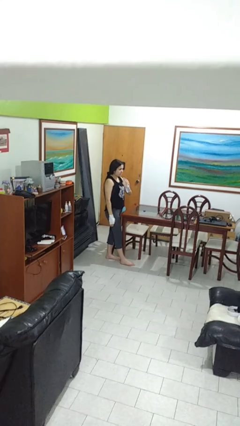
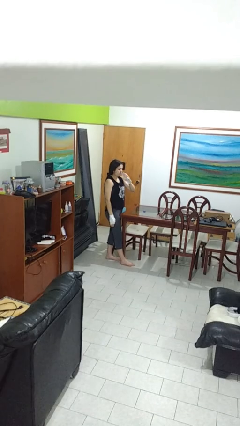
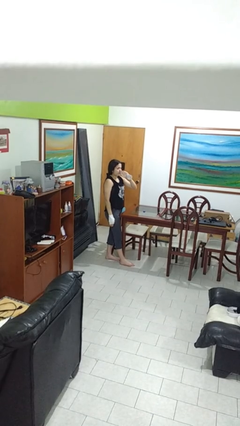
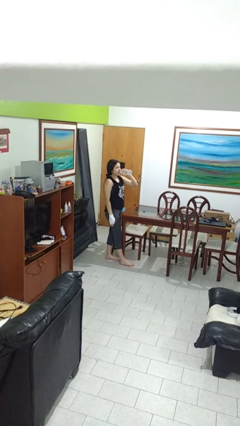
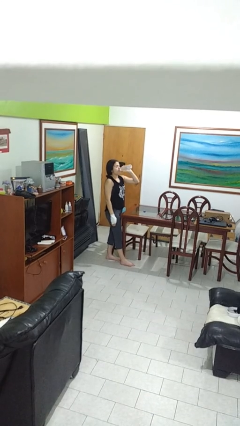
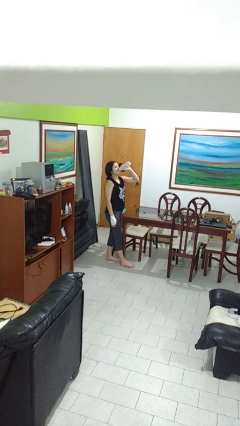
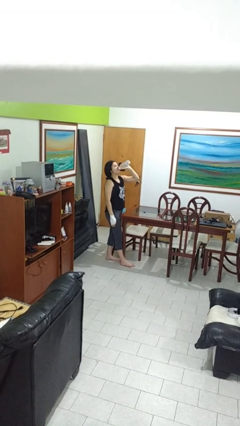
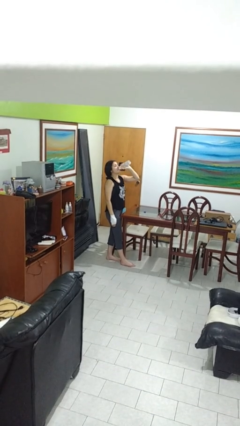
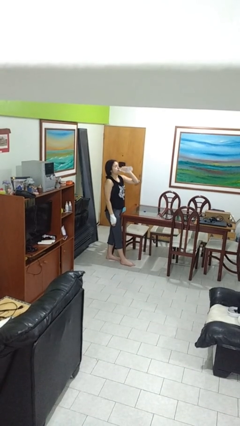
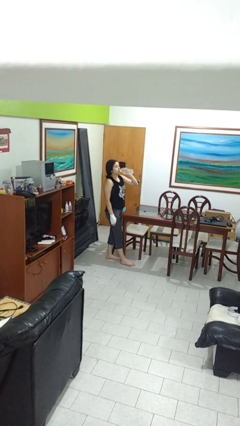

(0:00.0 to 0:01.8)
person drinks from bottle

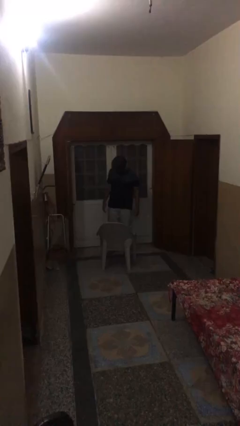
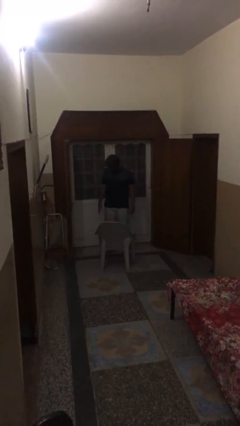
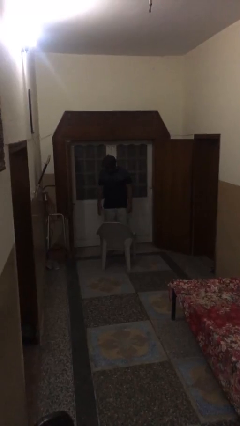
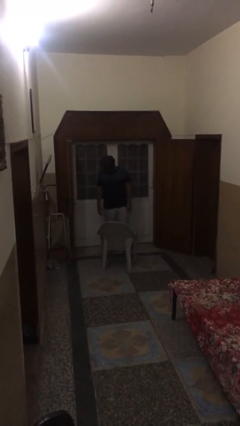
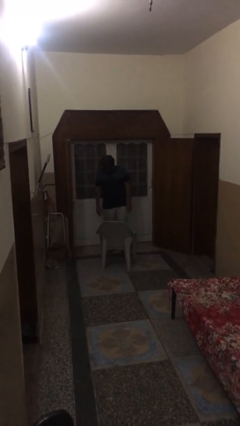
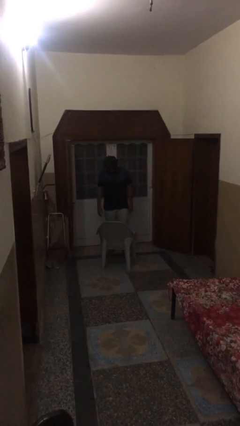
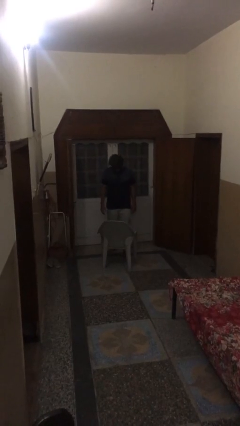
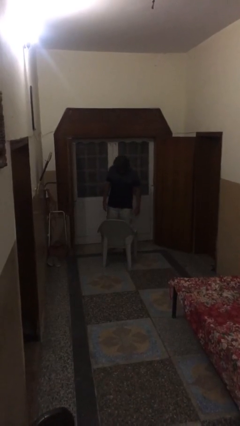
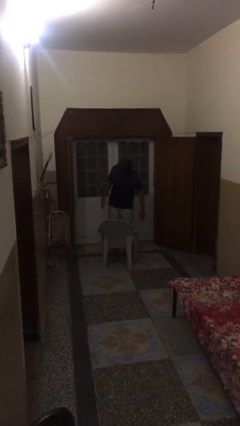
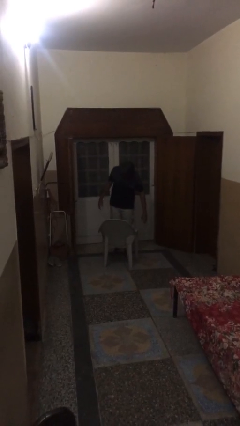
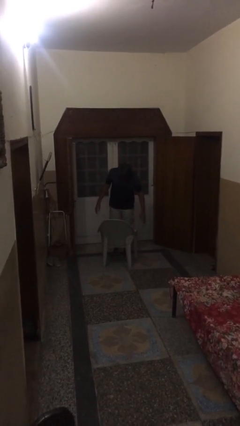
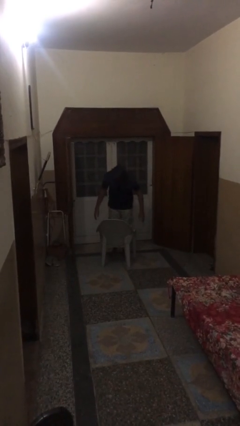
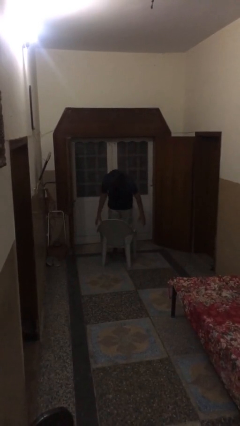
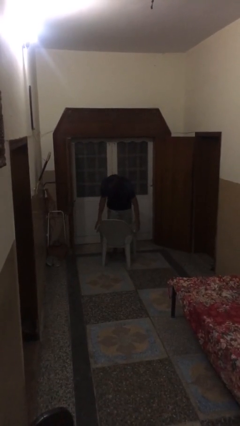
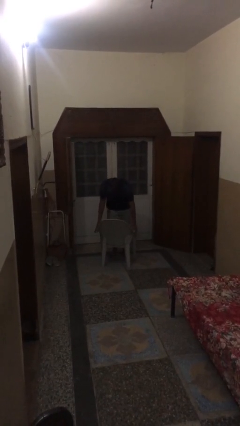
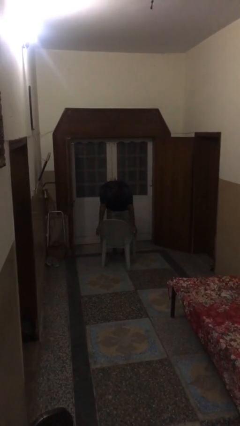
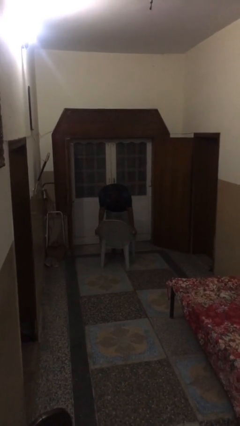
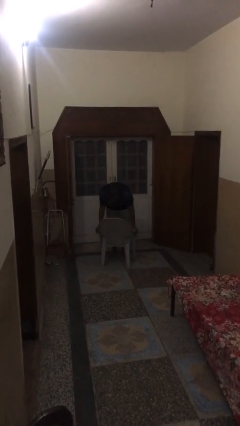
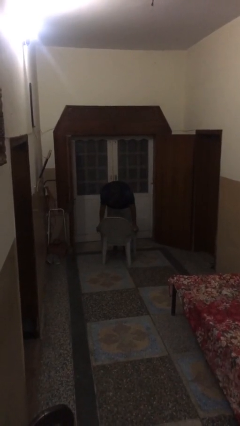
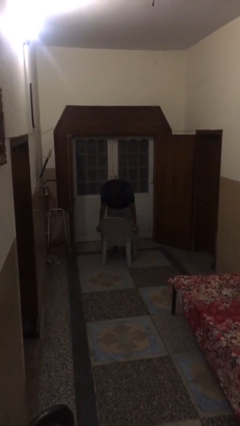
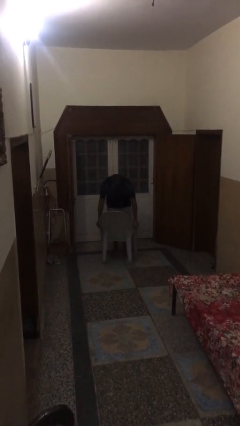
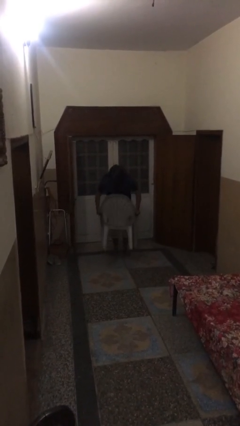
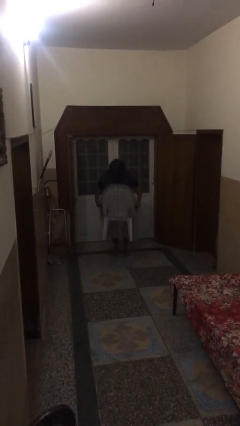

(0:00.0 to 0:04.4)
person picks up object from floor

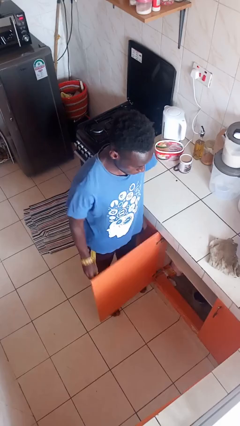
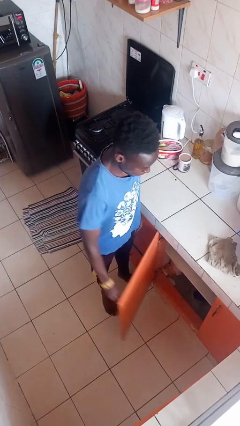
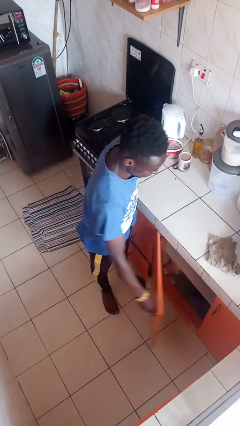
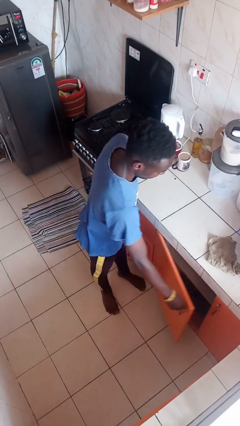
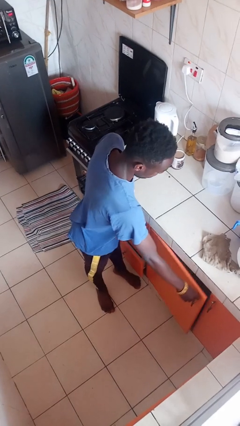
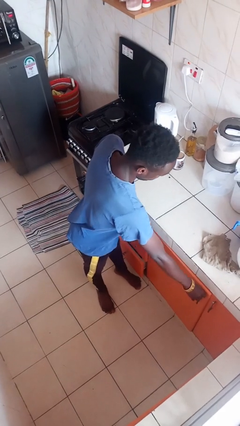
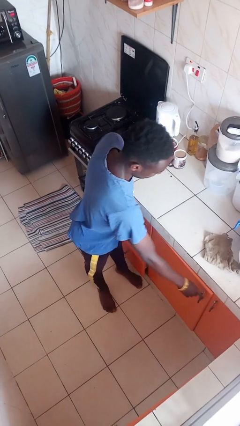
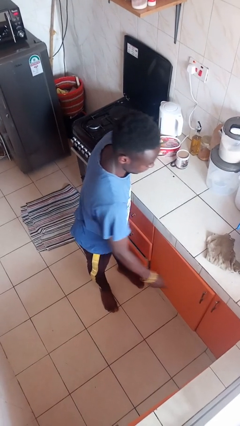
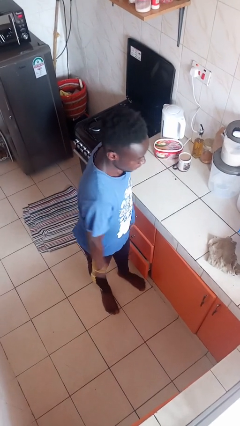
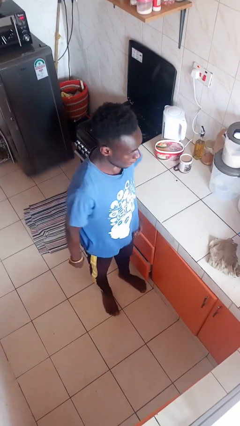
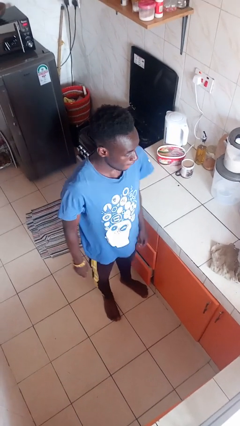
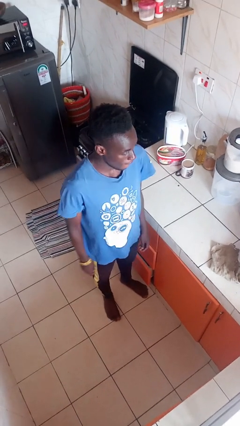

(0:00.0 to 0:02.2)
person closes cabinet

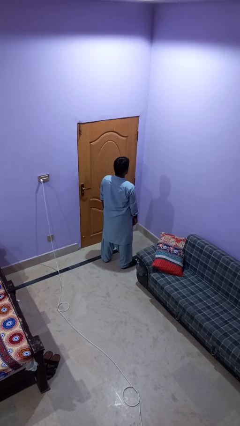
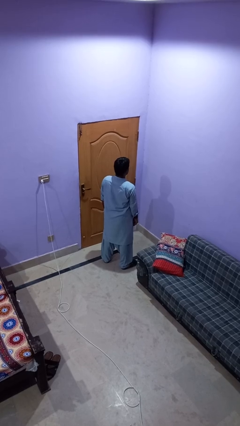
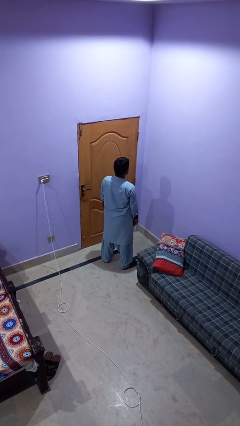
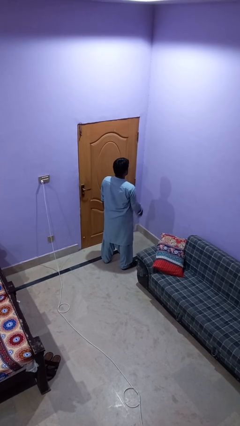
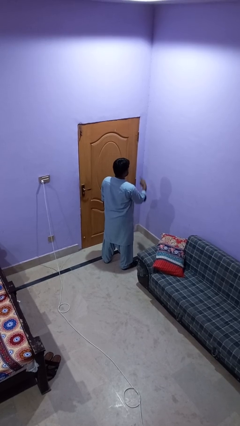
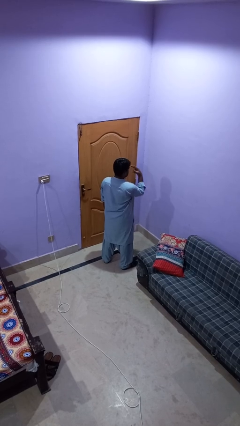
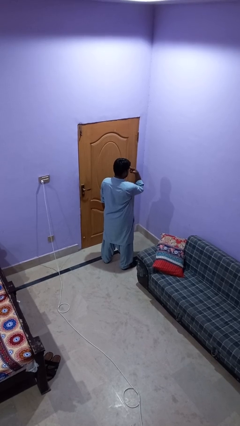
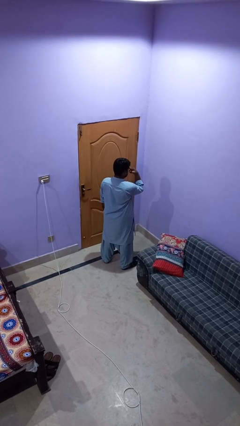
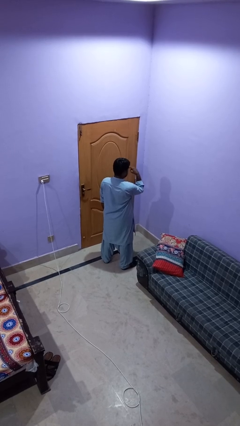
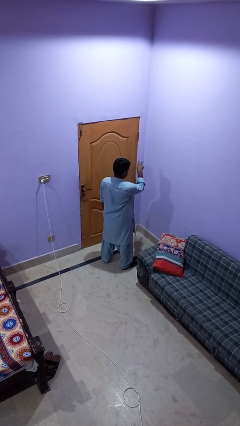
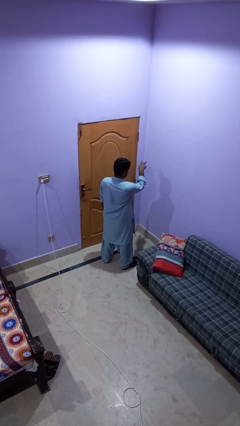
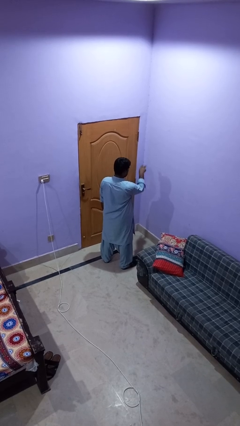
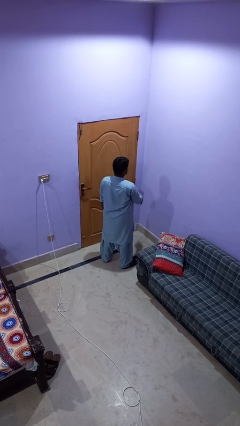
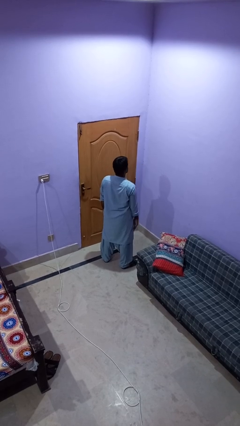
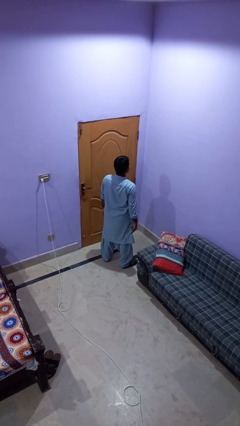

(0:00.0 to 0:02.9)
person gestures watch closely

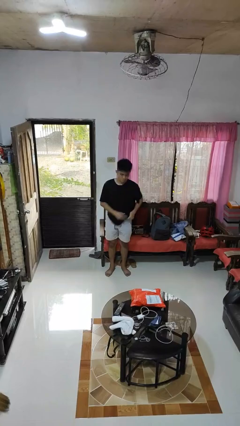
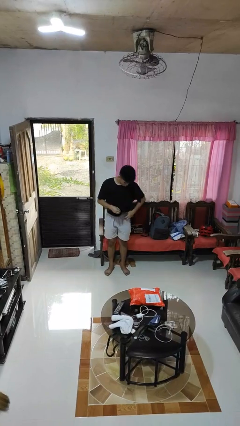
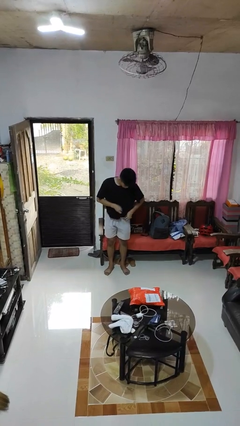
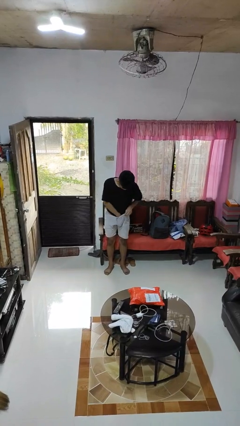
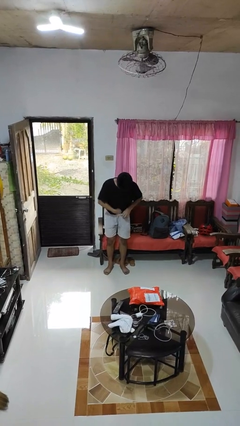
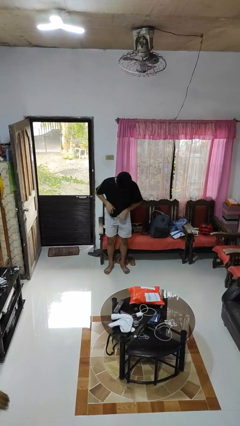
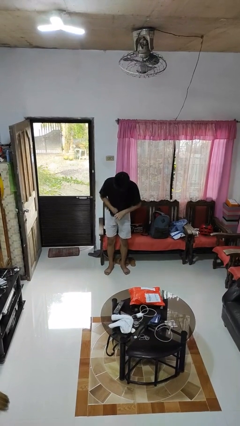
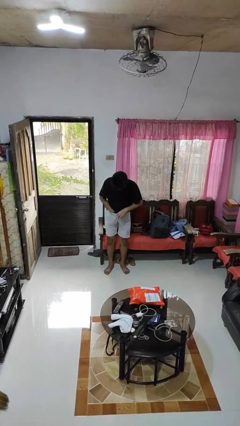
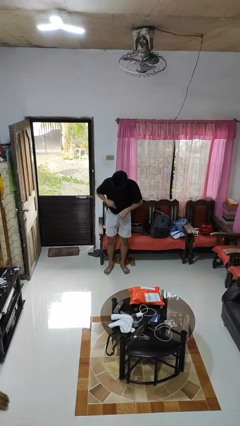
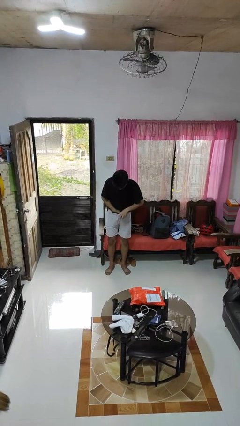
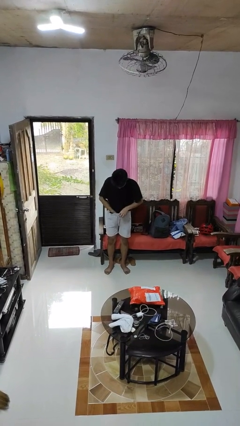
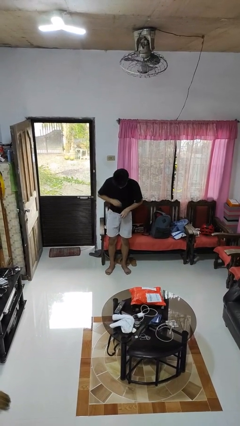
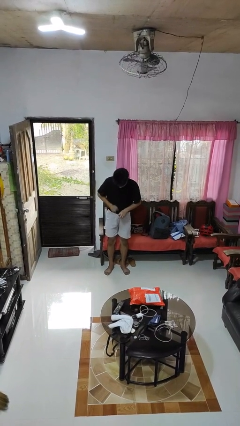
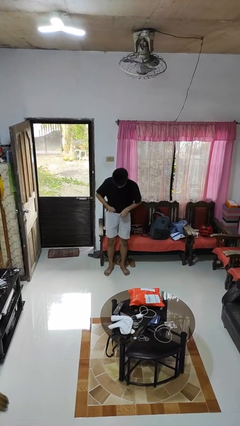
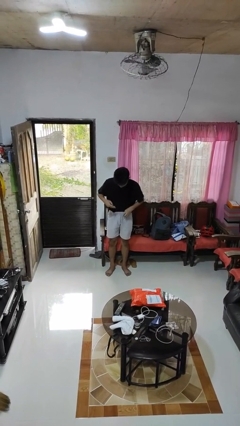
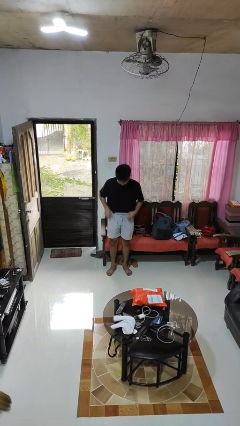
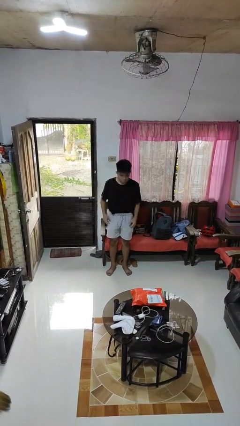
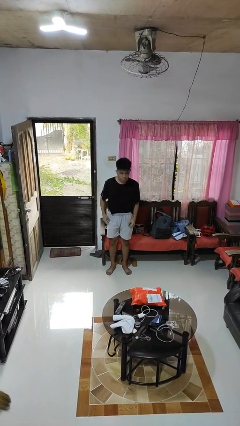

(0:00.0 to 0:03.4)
person tucks in shirt

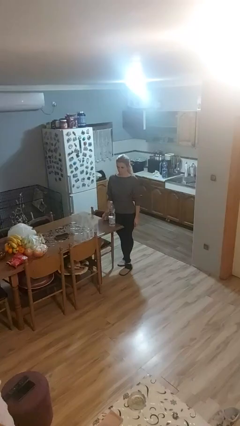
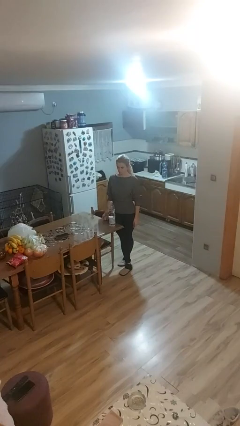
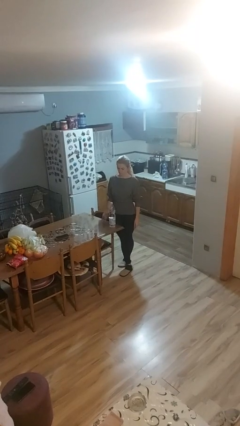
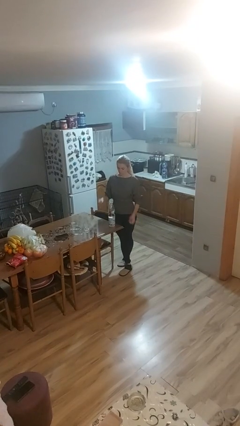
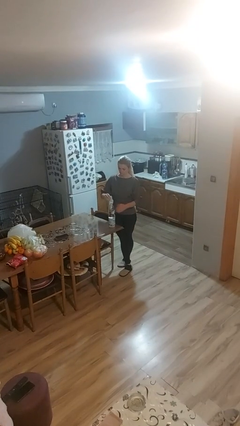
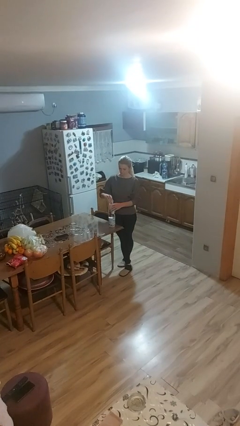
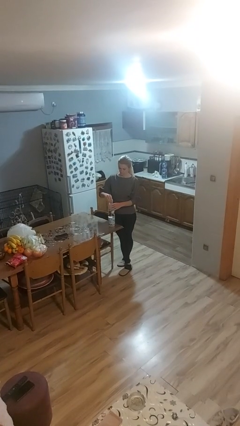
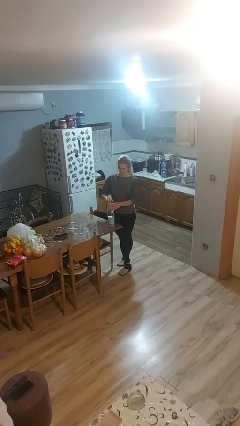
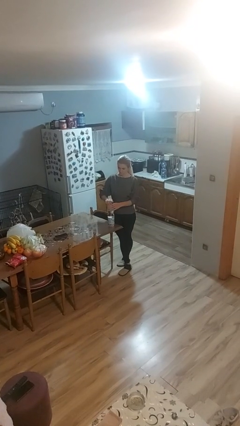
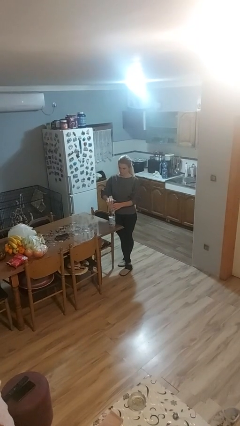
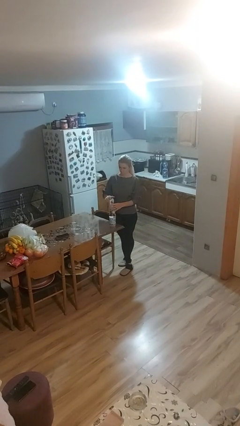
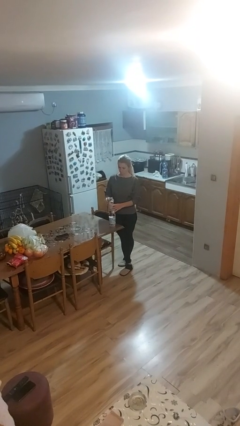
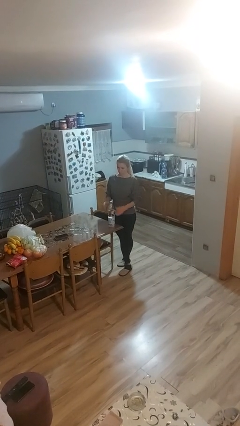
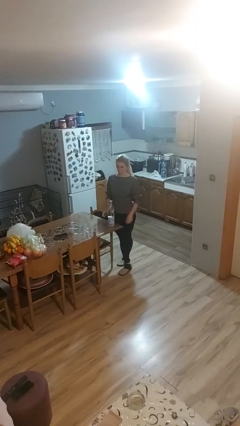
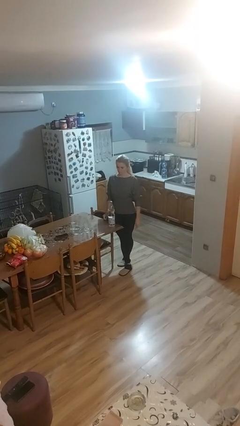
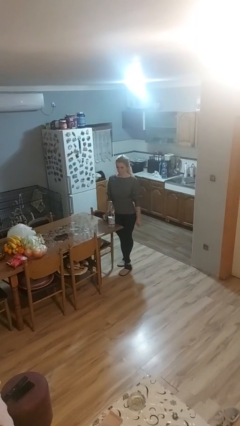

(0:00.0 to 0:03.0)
person screws lid to bottle
